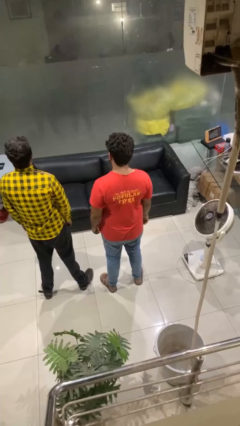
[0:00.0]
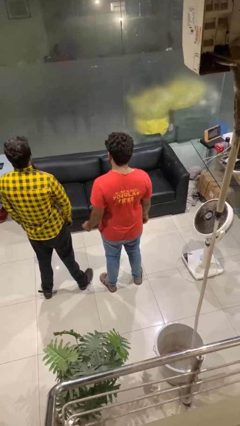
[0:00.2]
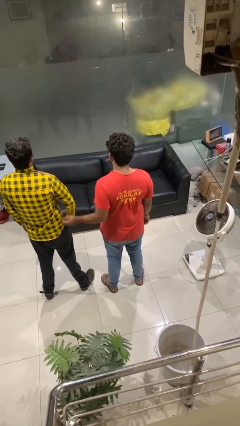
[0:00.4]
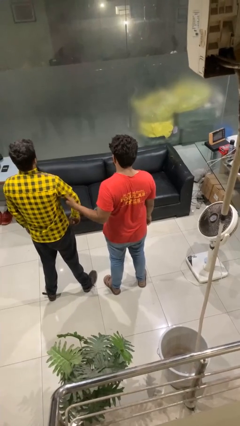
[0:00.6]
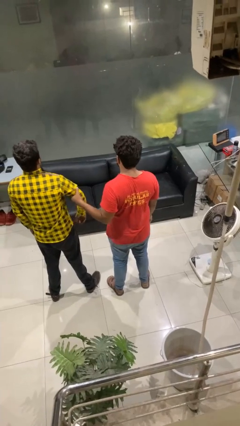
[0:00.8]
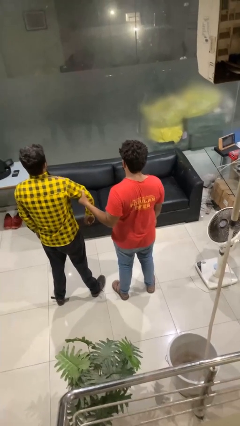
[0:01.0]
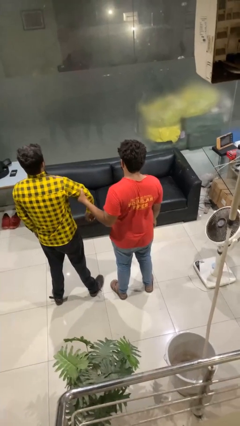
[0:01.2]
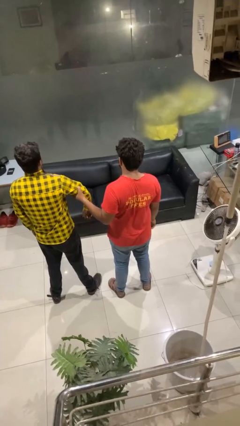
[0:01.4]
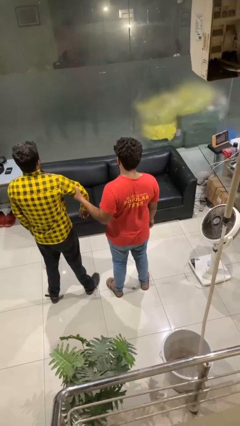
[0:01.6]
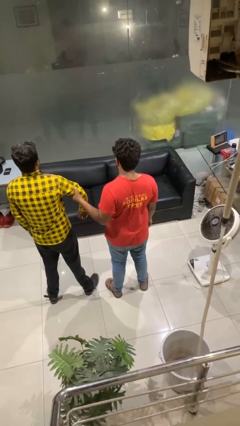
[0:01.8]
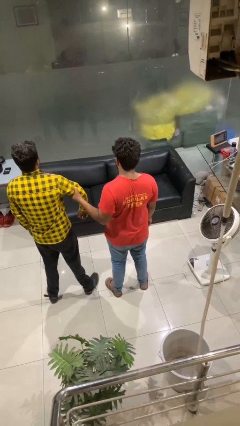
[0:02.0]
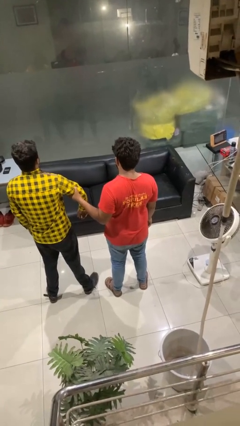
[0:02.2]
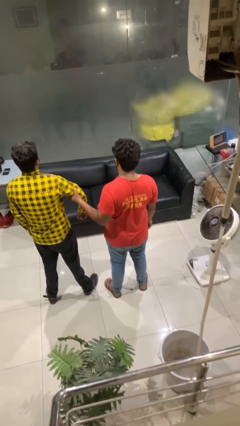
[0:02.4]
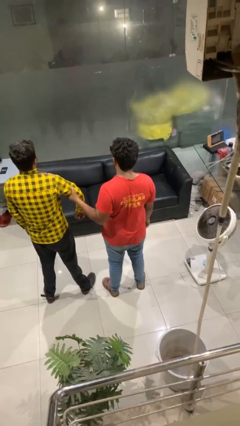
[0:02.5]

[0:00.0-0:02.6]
person grabs person by bicep

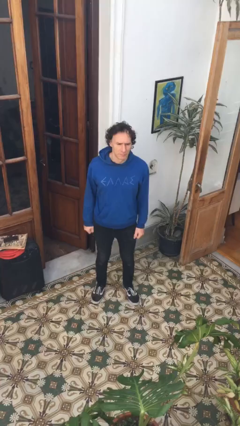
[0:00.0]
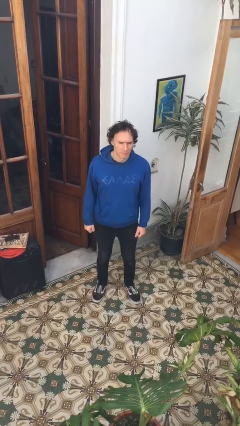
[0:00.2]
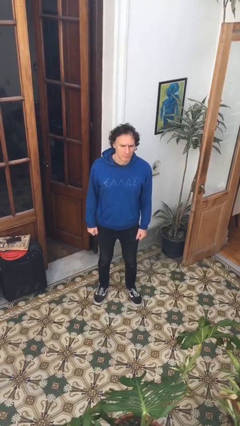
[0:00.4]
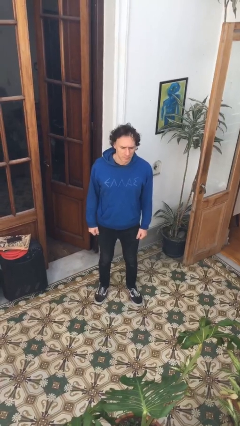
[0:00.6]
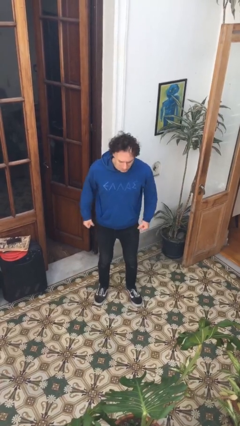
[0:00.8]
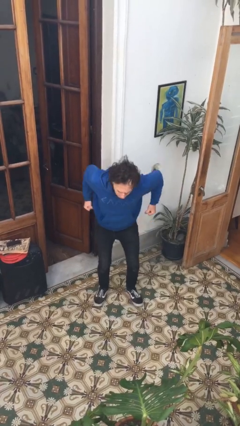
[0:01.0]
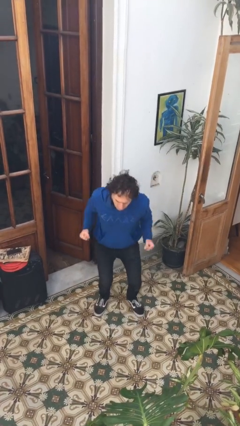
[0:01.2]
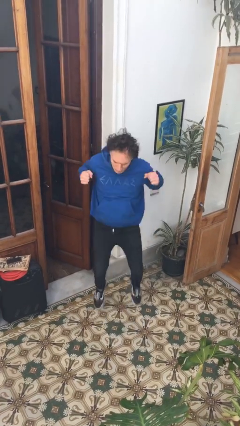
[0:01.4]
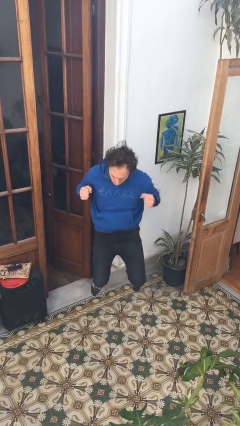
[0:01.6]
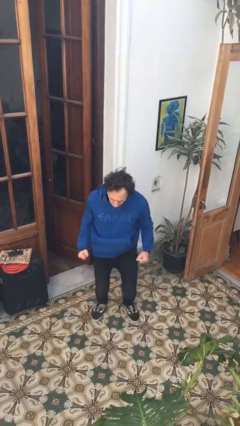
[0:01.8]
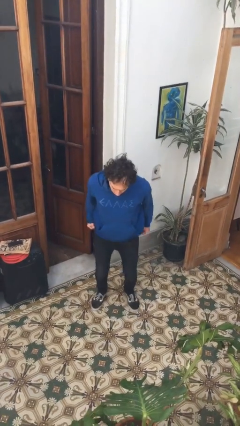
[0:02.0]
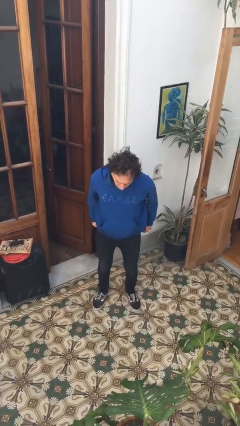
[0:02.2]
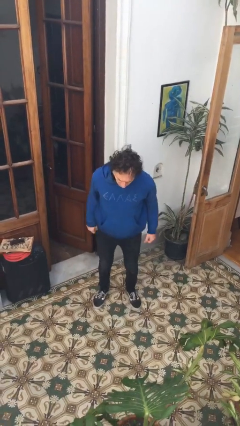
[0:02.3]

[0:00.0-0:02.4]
person jumps

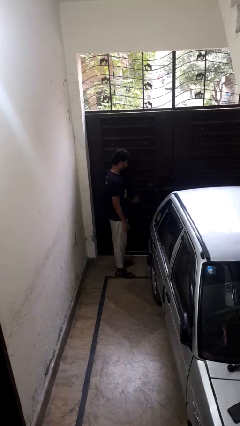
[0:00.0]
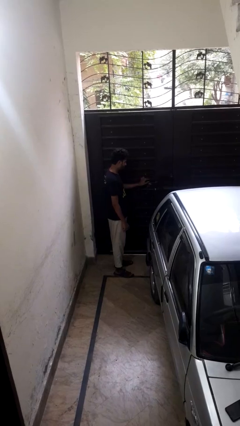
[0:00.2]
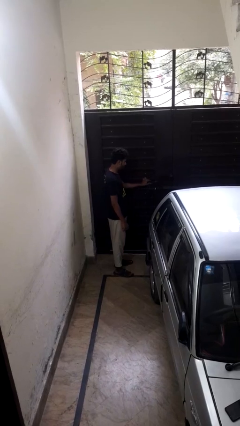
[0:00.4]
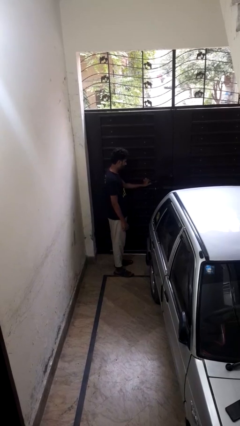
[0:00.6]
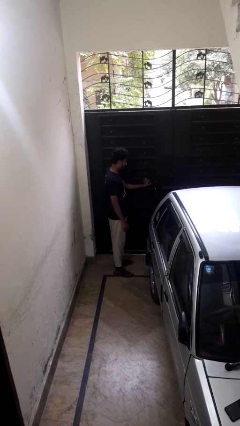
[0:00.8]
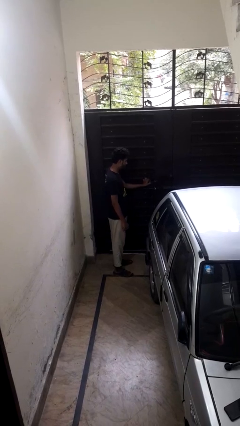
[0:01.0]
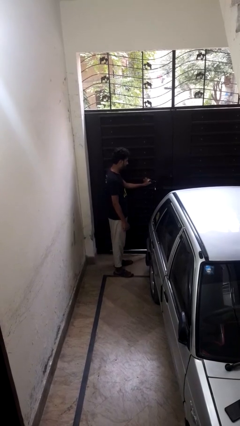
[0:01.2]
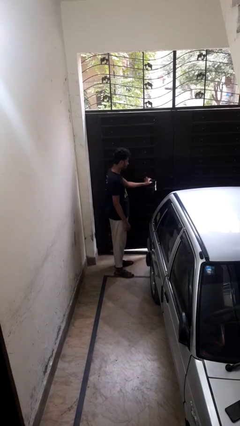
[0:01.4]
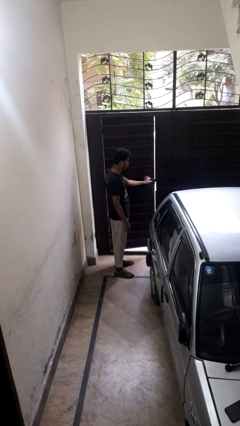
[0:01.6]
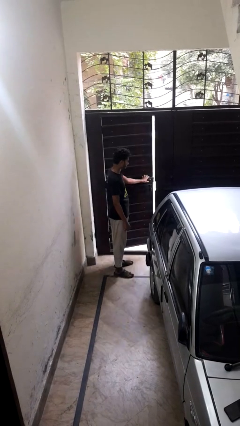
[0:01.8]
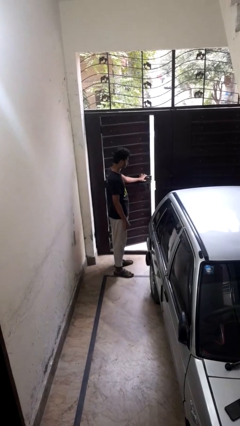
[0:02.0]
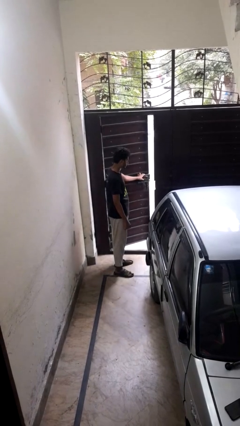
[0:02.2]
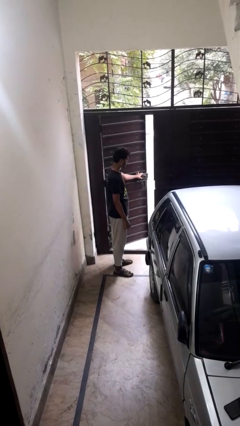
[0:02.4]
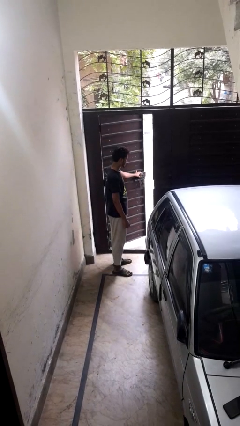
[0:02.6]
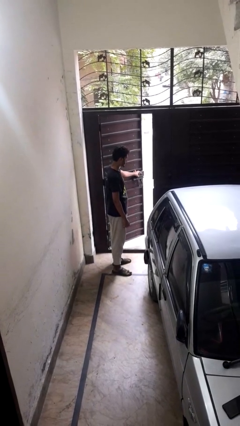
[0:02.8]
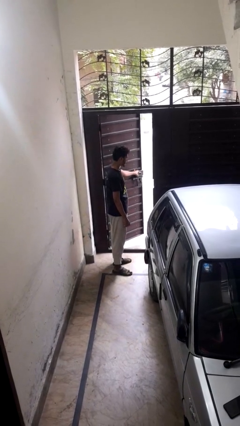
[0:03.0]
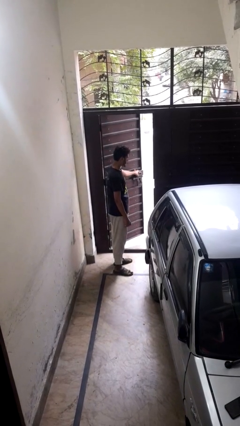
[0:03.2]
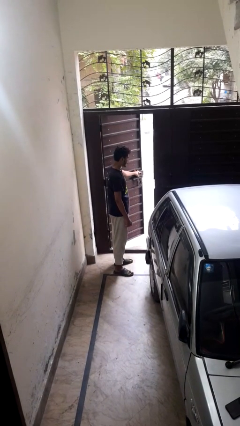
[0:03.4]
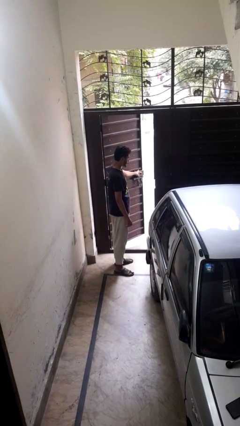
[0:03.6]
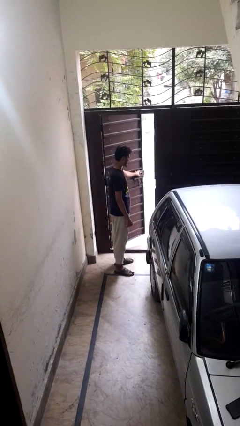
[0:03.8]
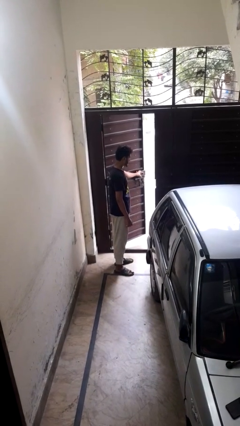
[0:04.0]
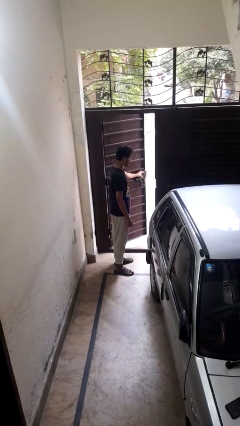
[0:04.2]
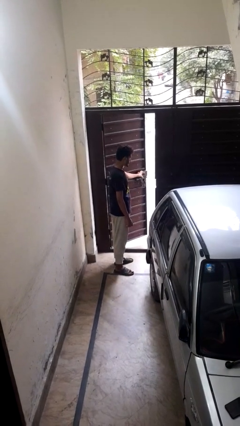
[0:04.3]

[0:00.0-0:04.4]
person opens gate

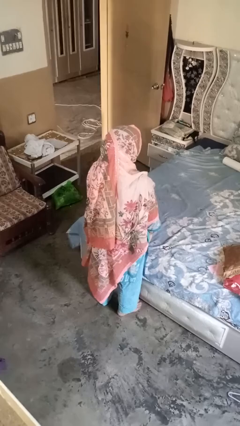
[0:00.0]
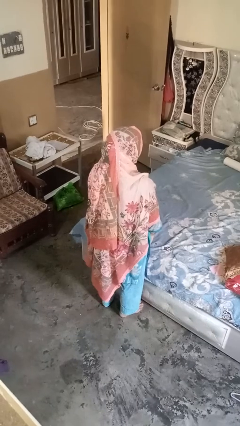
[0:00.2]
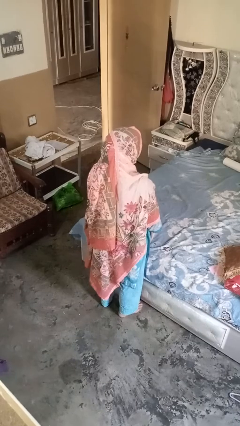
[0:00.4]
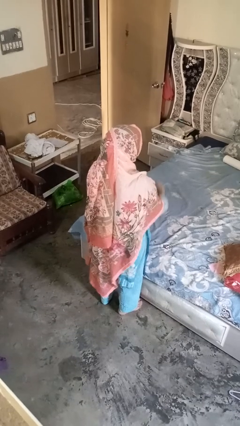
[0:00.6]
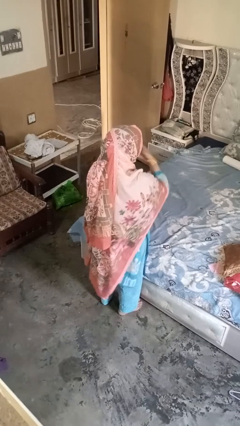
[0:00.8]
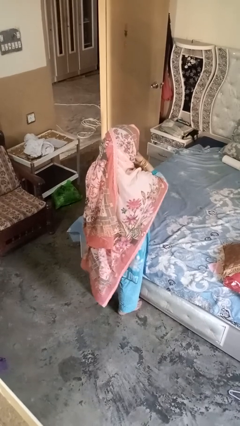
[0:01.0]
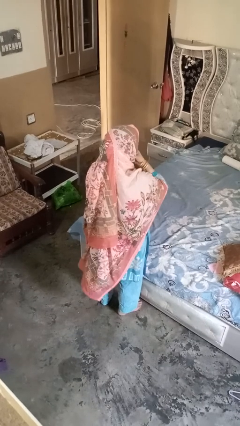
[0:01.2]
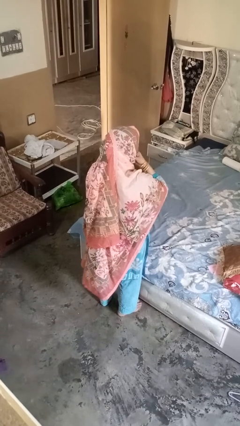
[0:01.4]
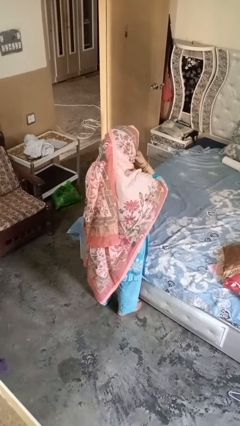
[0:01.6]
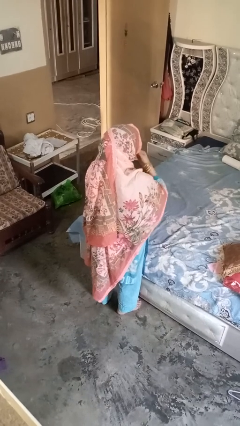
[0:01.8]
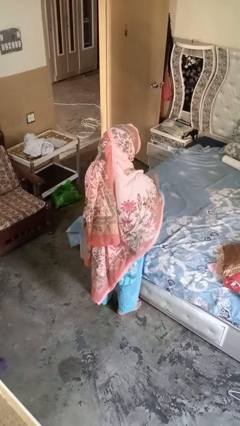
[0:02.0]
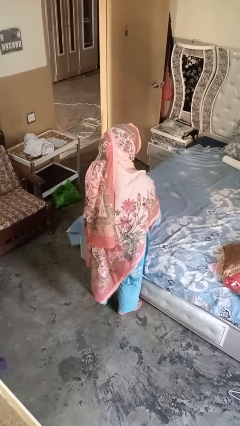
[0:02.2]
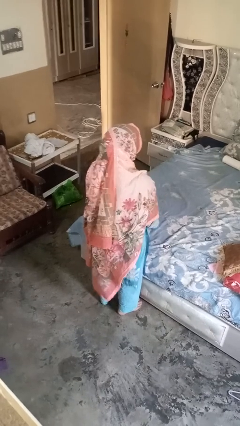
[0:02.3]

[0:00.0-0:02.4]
person strokes chin

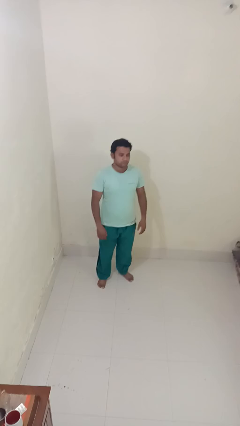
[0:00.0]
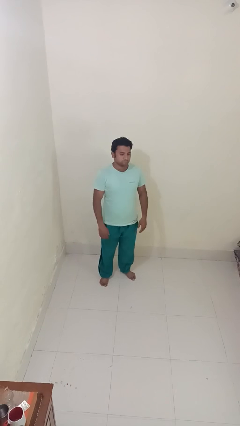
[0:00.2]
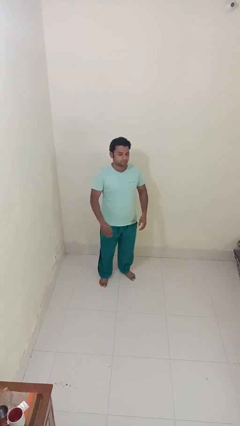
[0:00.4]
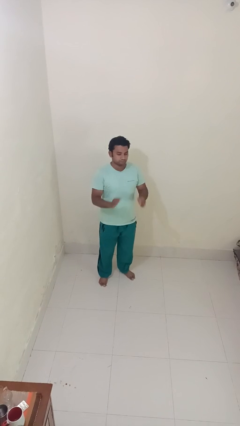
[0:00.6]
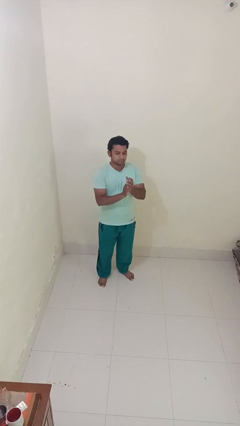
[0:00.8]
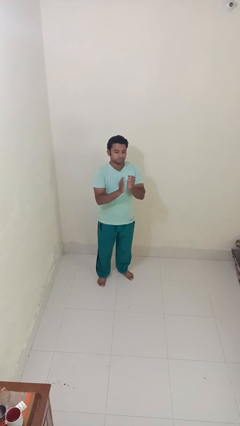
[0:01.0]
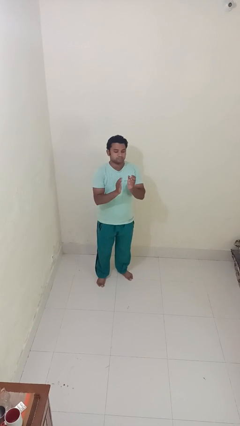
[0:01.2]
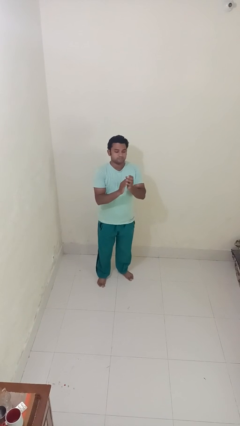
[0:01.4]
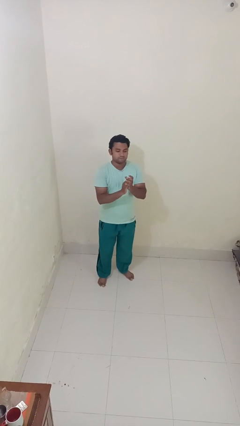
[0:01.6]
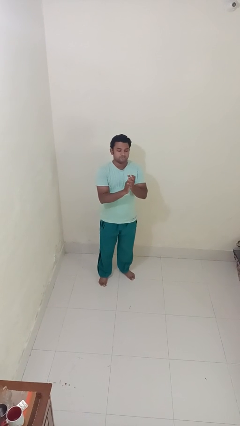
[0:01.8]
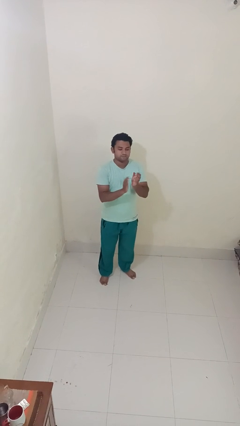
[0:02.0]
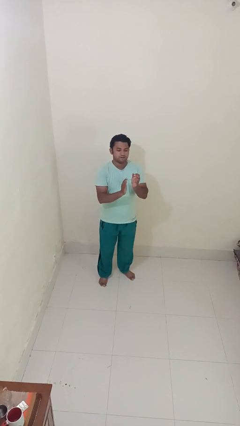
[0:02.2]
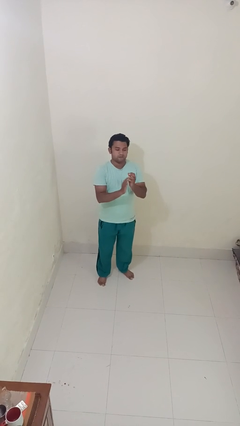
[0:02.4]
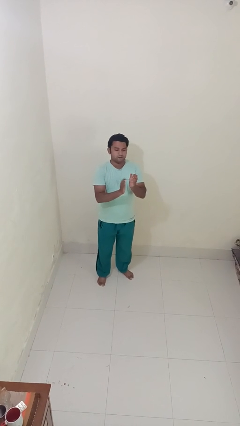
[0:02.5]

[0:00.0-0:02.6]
person claps hands

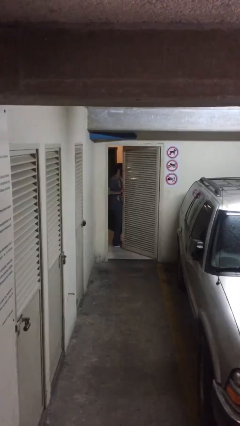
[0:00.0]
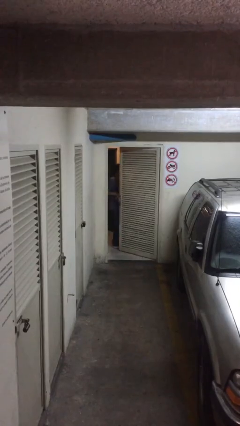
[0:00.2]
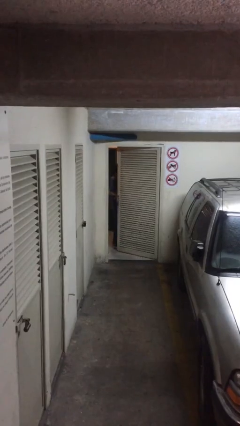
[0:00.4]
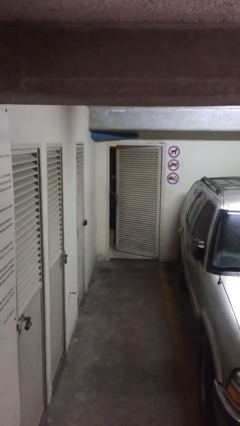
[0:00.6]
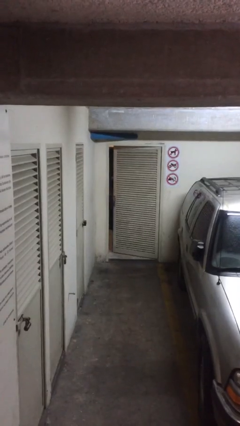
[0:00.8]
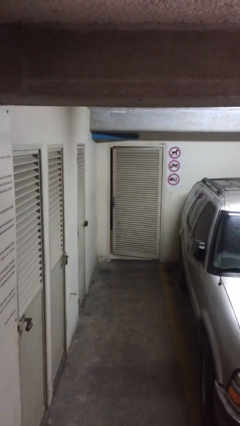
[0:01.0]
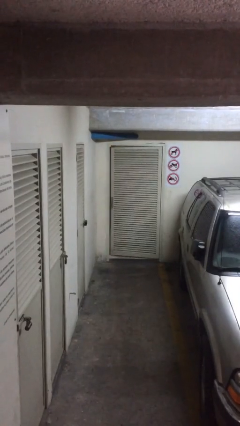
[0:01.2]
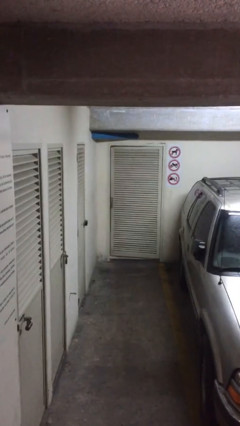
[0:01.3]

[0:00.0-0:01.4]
person closes facility door

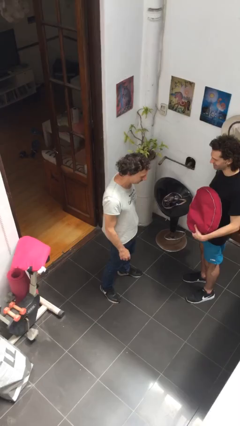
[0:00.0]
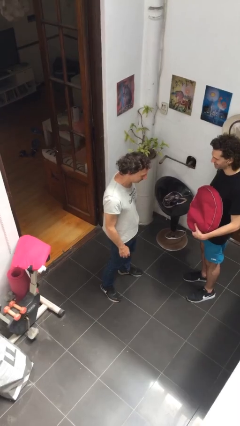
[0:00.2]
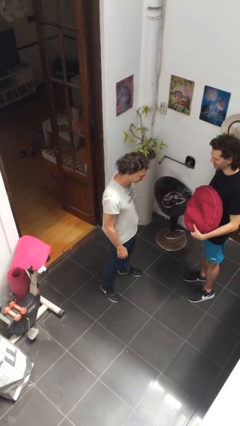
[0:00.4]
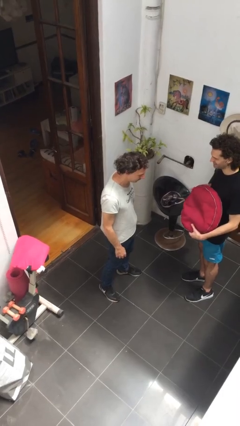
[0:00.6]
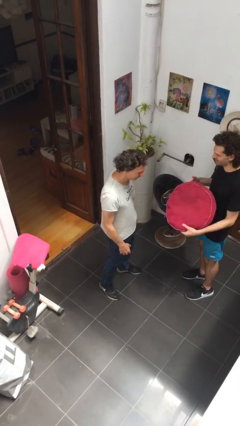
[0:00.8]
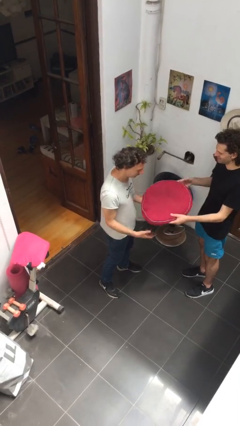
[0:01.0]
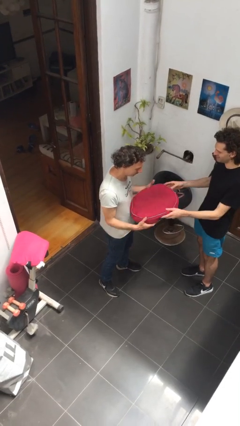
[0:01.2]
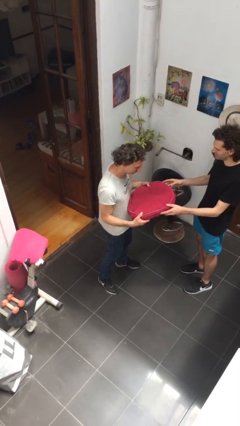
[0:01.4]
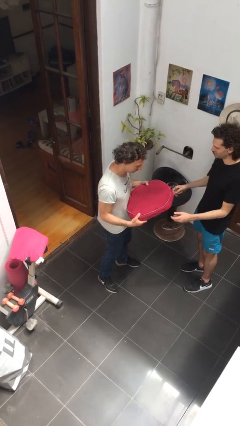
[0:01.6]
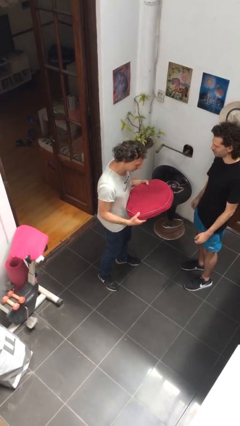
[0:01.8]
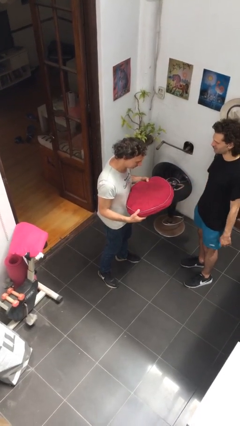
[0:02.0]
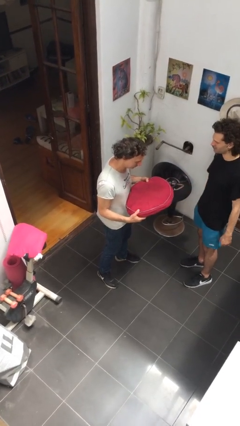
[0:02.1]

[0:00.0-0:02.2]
person transfers object to person
